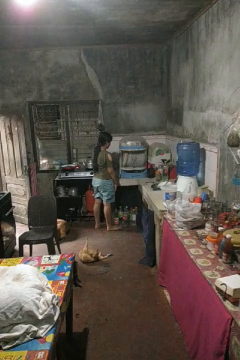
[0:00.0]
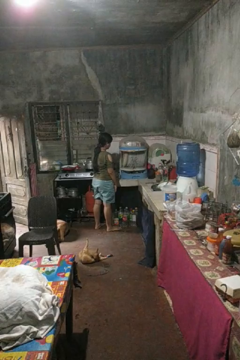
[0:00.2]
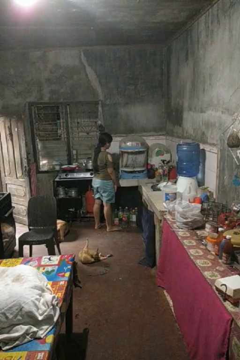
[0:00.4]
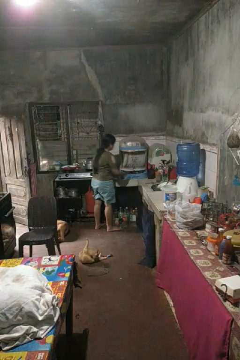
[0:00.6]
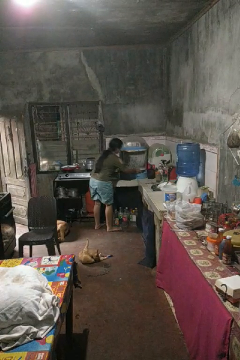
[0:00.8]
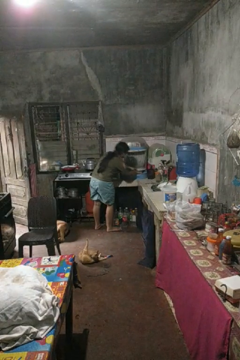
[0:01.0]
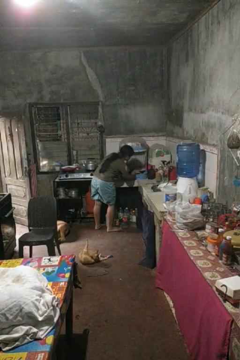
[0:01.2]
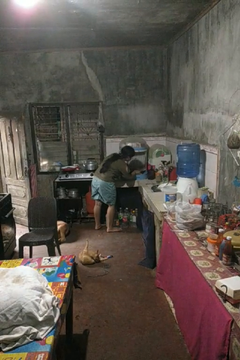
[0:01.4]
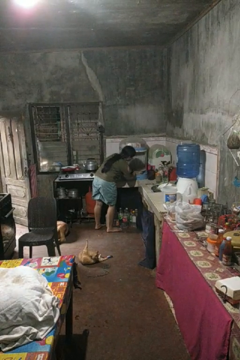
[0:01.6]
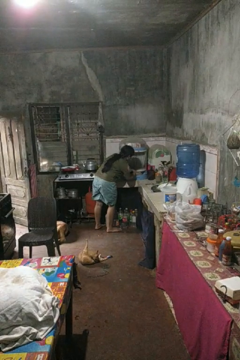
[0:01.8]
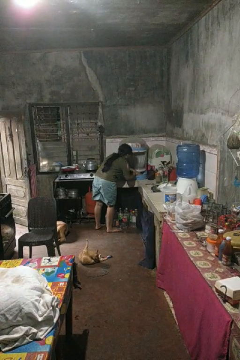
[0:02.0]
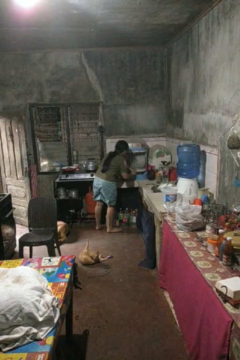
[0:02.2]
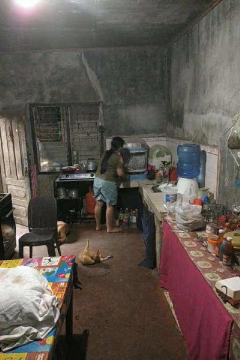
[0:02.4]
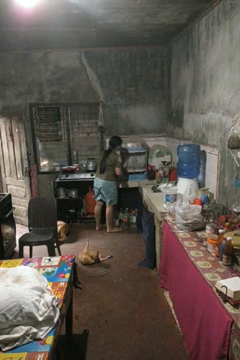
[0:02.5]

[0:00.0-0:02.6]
person searches in kitchen drawer

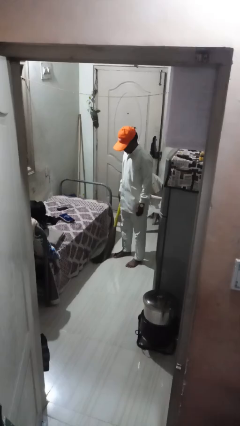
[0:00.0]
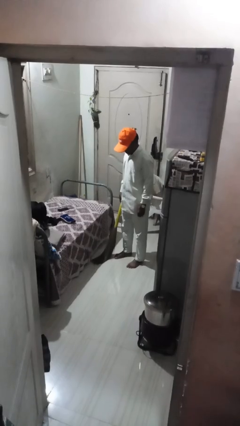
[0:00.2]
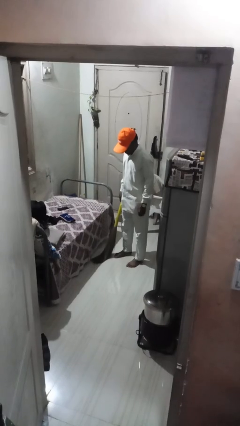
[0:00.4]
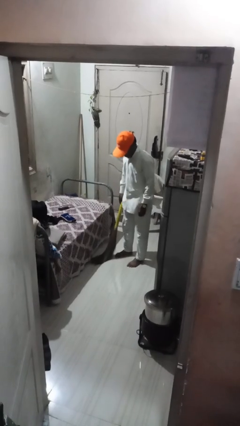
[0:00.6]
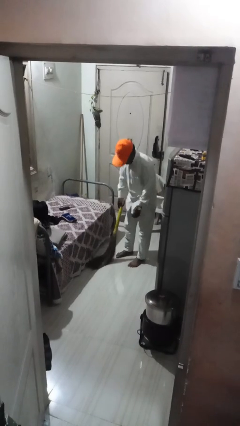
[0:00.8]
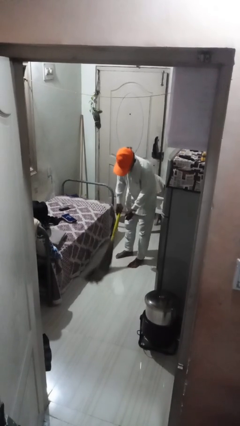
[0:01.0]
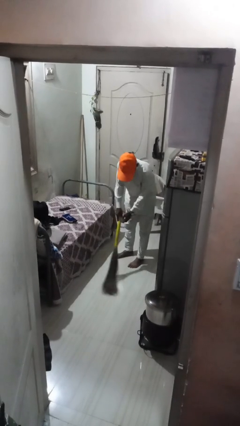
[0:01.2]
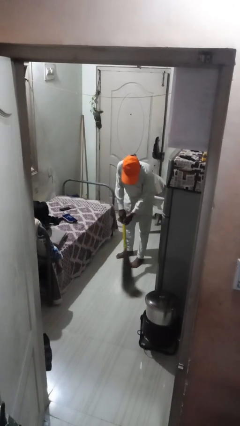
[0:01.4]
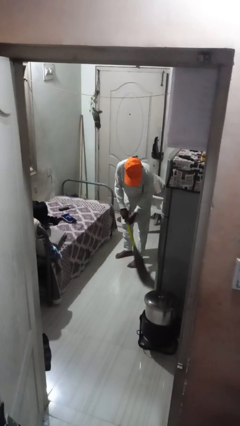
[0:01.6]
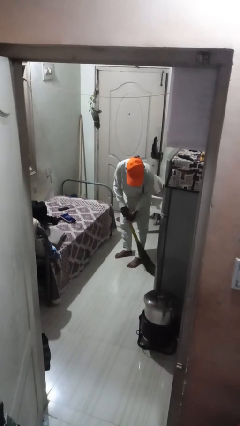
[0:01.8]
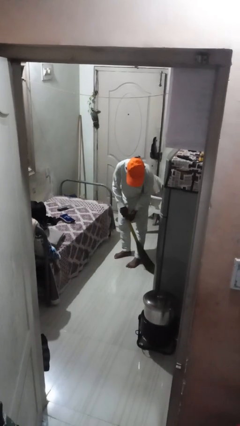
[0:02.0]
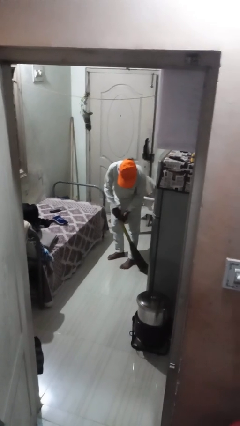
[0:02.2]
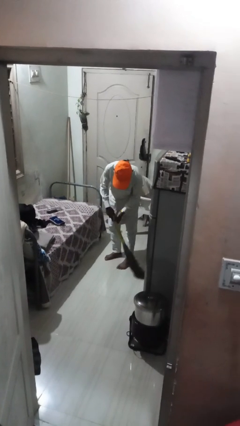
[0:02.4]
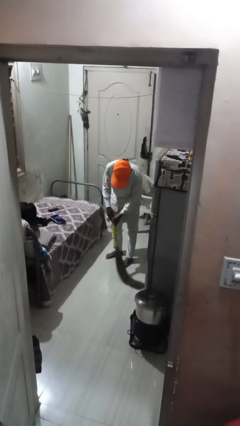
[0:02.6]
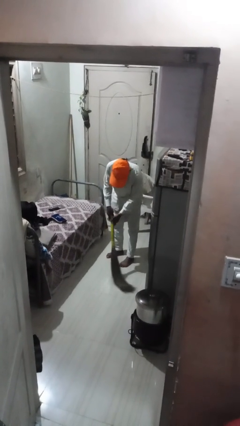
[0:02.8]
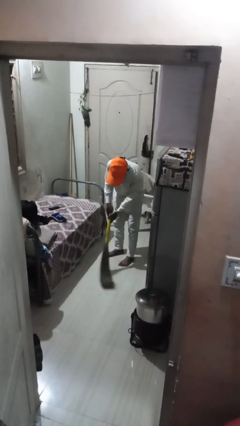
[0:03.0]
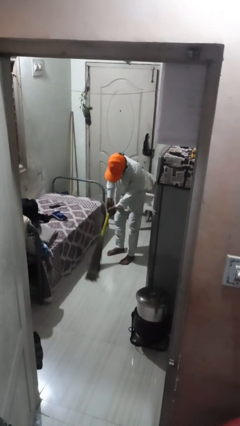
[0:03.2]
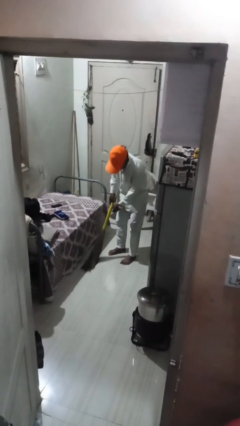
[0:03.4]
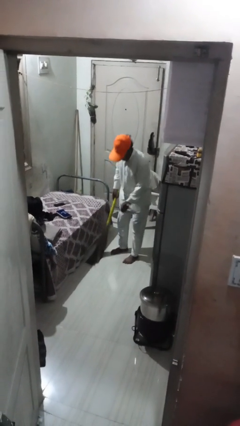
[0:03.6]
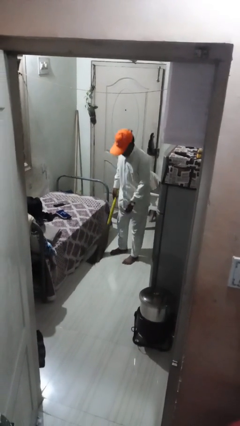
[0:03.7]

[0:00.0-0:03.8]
person sweeps floor

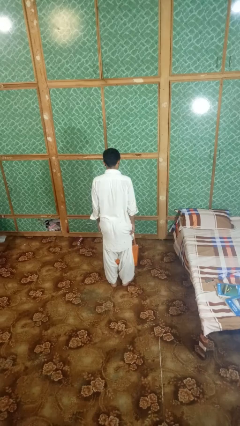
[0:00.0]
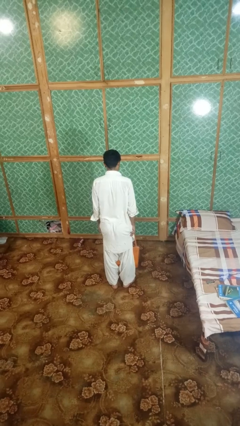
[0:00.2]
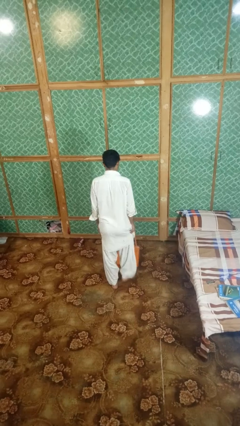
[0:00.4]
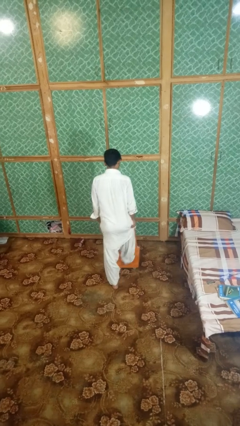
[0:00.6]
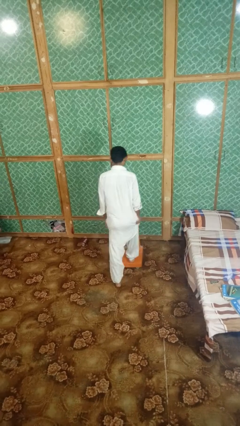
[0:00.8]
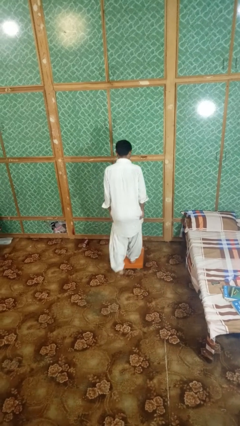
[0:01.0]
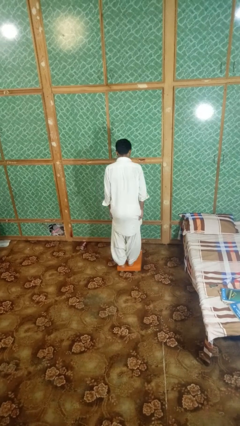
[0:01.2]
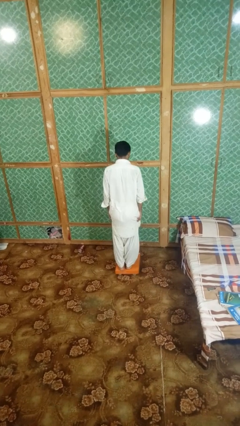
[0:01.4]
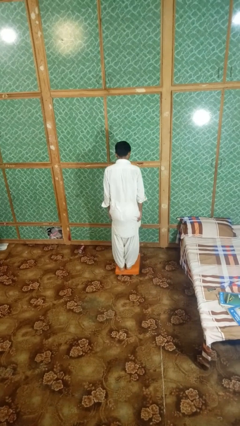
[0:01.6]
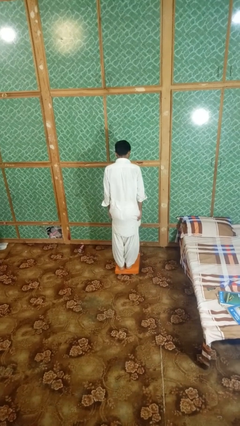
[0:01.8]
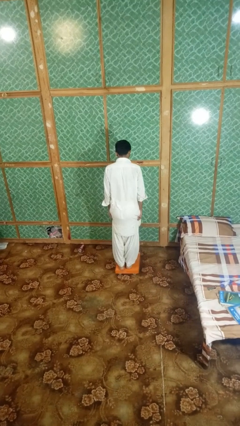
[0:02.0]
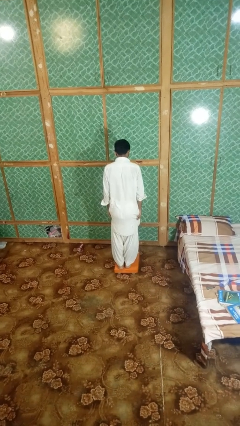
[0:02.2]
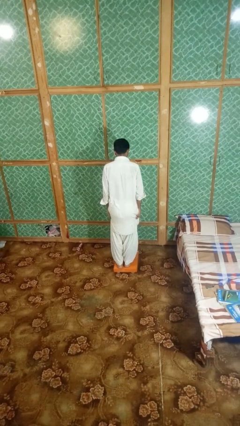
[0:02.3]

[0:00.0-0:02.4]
person uses bodyweight scale

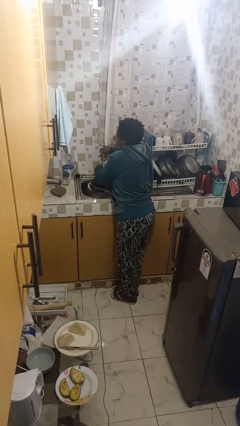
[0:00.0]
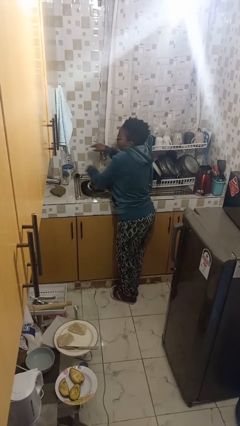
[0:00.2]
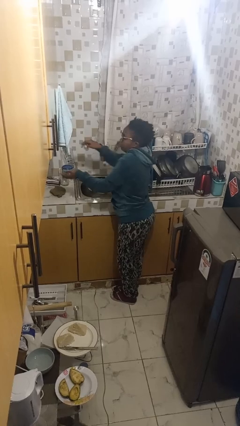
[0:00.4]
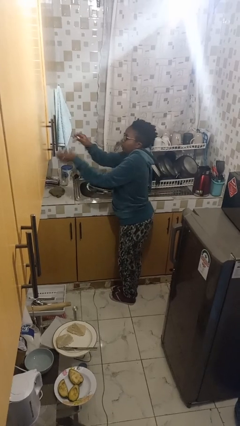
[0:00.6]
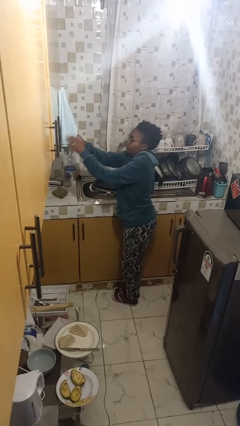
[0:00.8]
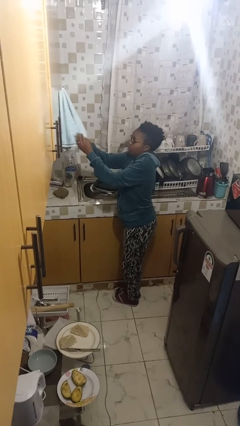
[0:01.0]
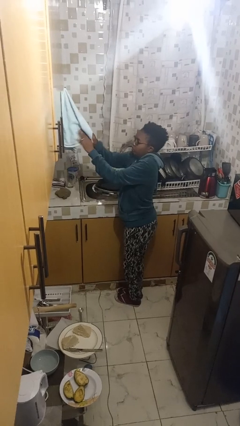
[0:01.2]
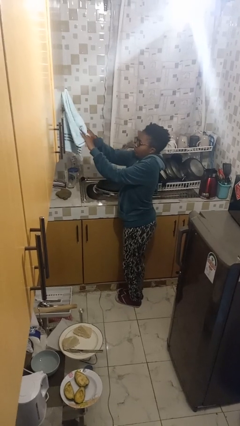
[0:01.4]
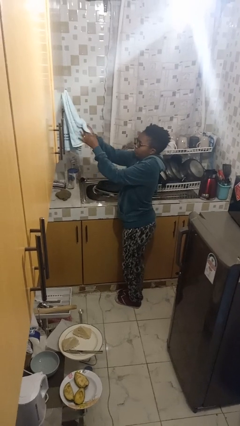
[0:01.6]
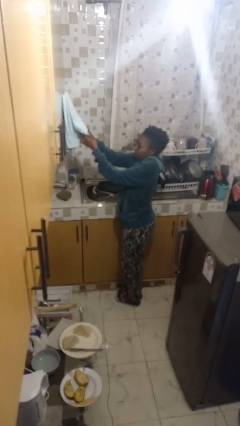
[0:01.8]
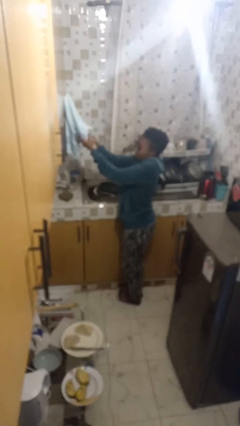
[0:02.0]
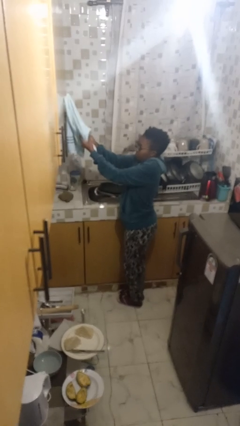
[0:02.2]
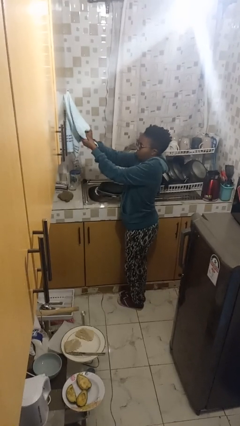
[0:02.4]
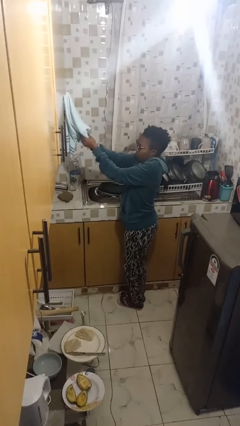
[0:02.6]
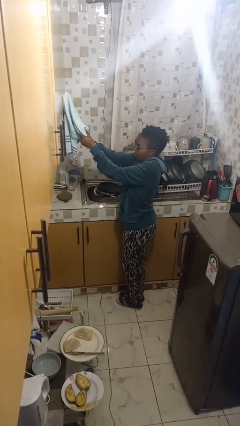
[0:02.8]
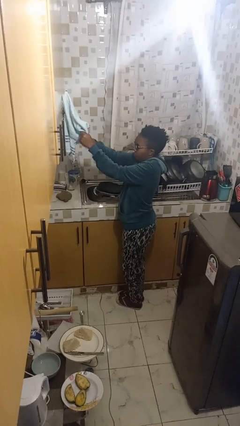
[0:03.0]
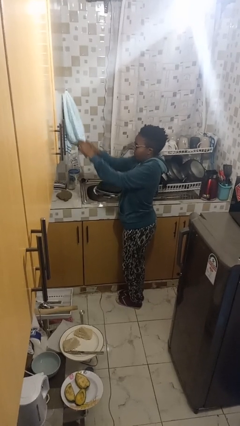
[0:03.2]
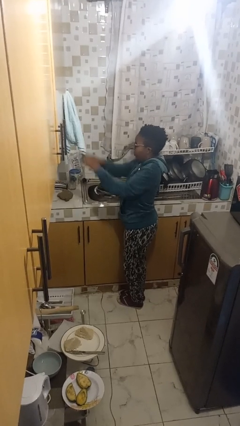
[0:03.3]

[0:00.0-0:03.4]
person dries hands with towel

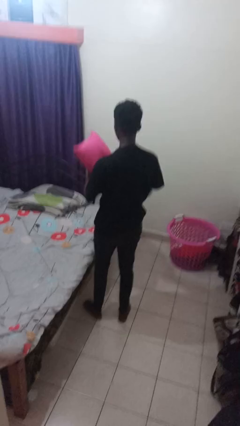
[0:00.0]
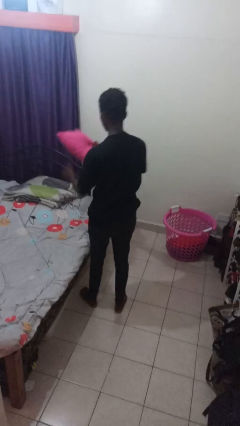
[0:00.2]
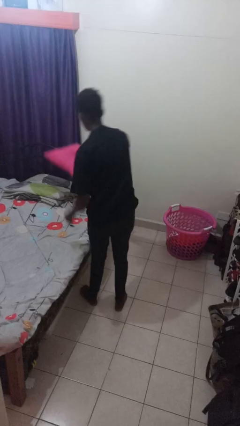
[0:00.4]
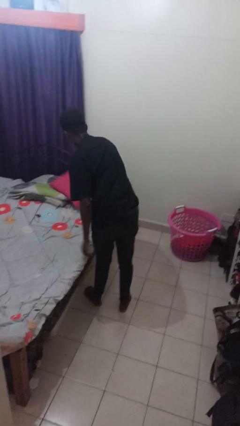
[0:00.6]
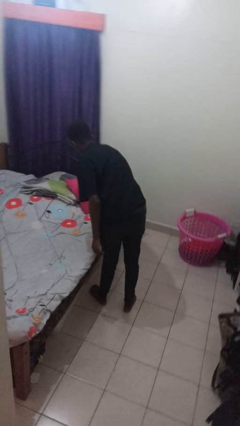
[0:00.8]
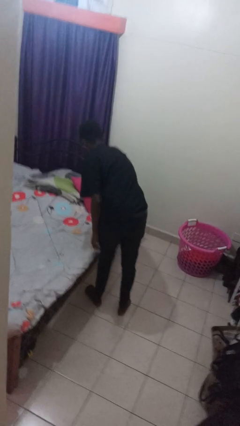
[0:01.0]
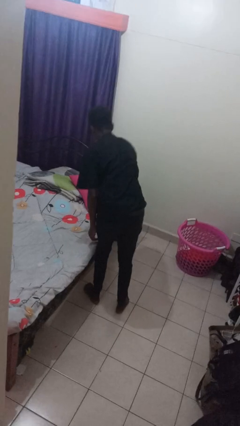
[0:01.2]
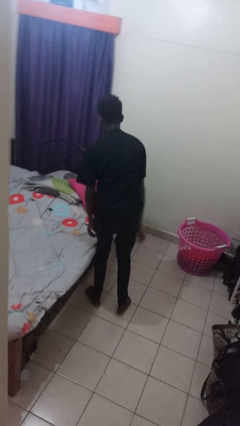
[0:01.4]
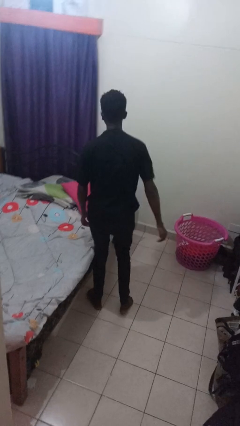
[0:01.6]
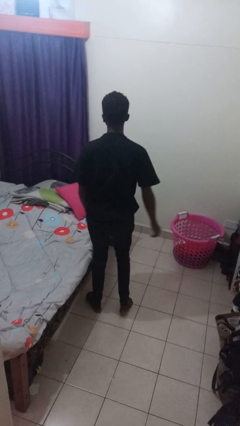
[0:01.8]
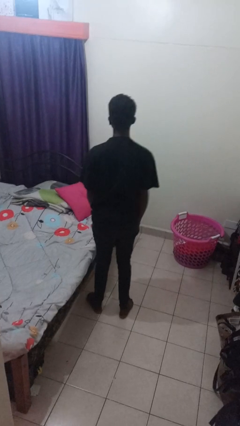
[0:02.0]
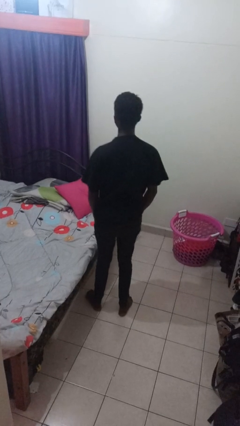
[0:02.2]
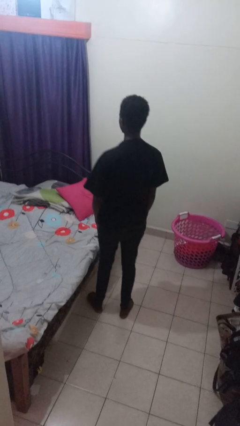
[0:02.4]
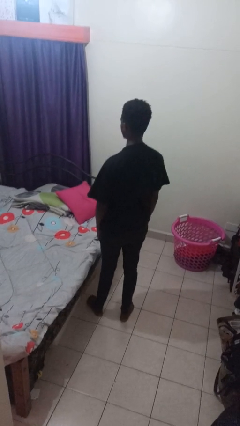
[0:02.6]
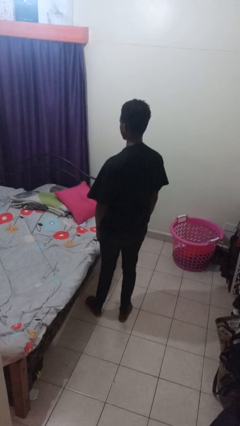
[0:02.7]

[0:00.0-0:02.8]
person puts down object on bed

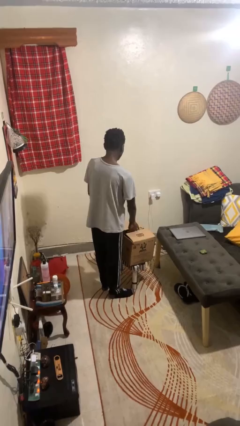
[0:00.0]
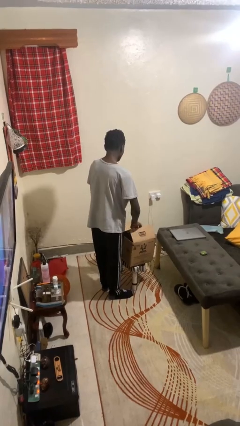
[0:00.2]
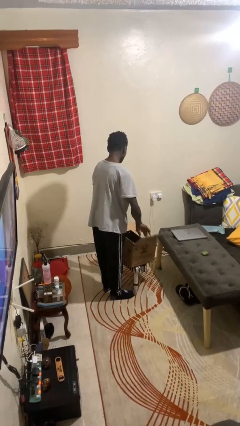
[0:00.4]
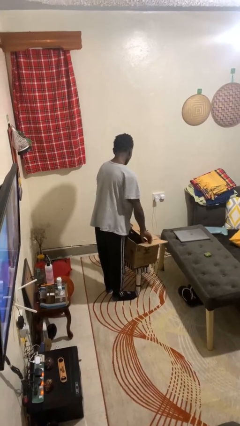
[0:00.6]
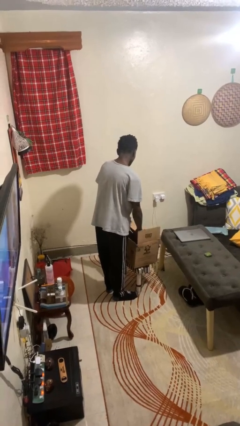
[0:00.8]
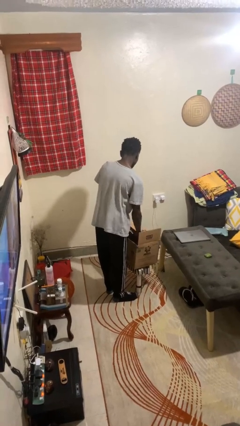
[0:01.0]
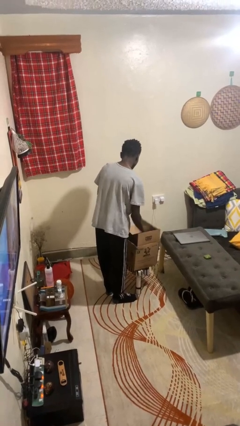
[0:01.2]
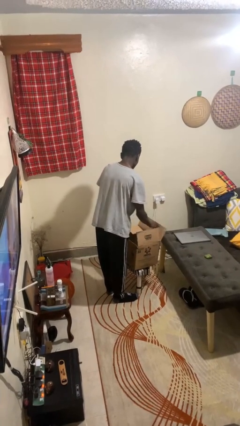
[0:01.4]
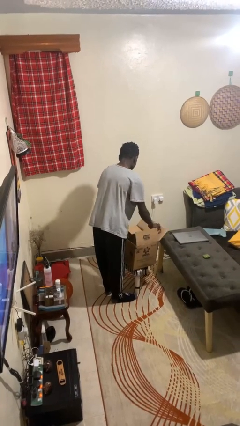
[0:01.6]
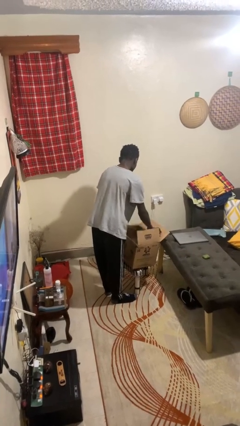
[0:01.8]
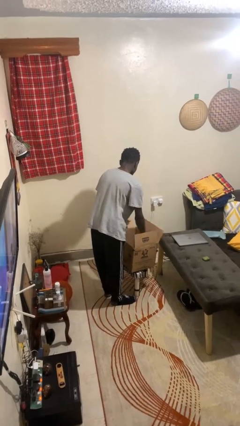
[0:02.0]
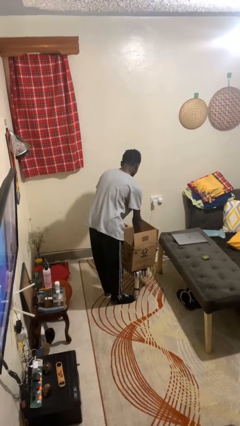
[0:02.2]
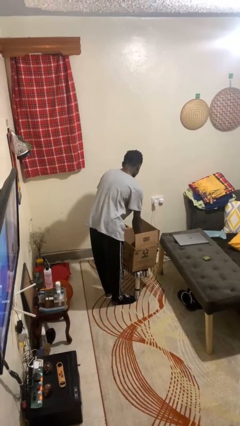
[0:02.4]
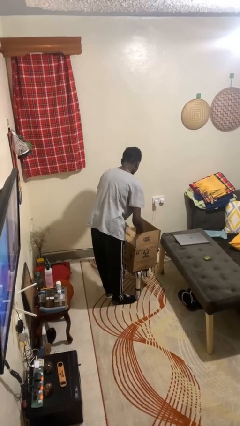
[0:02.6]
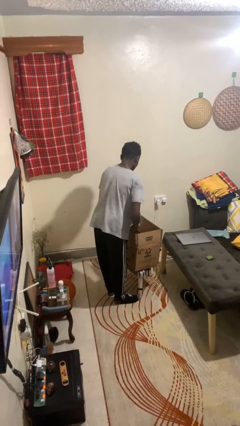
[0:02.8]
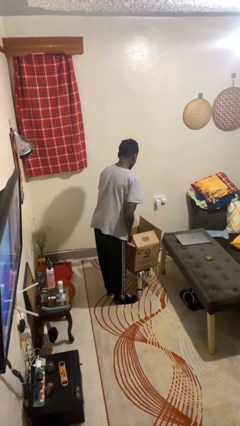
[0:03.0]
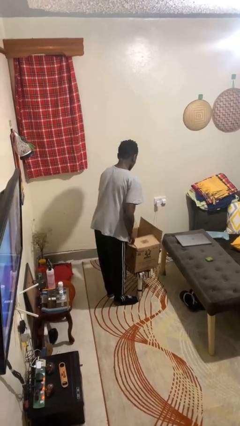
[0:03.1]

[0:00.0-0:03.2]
person opens box
